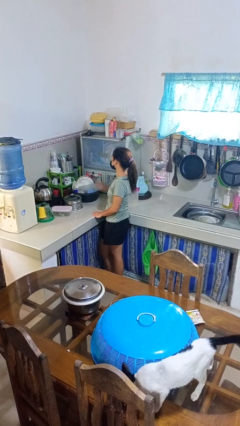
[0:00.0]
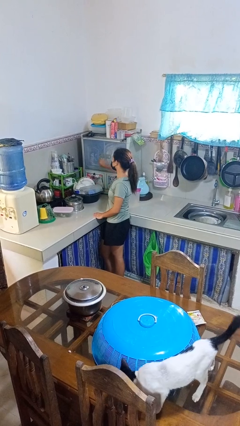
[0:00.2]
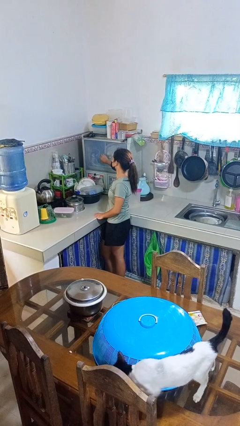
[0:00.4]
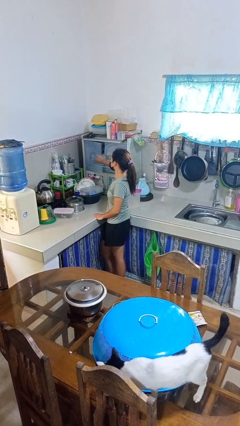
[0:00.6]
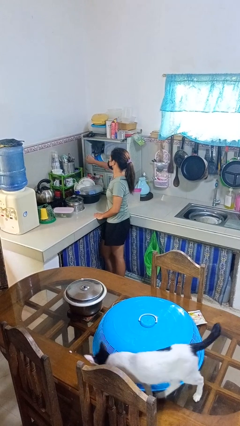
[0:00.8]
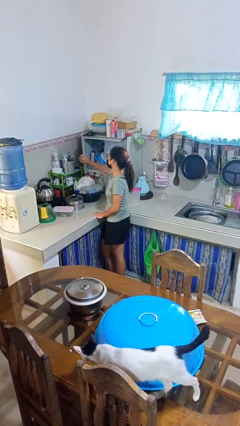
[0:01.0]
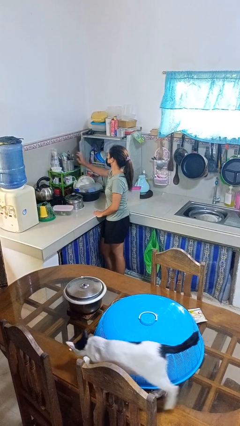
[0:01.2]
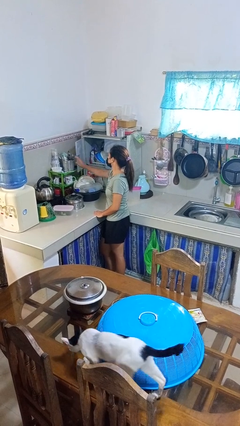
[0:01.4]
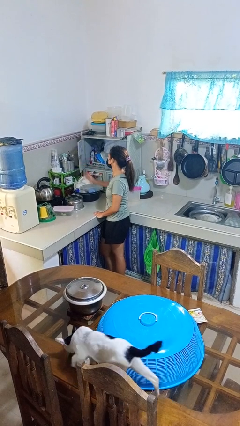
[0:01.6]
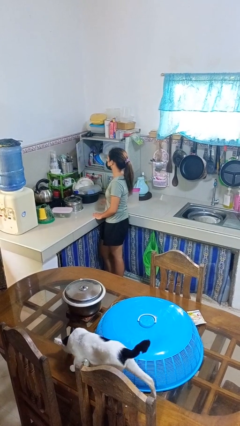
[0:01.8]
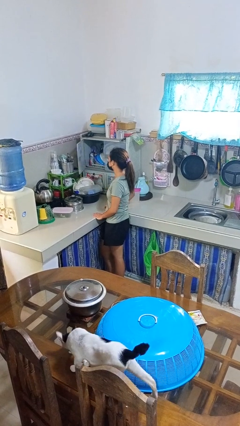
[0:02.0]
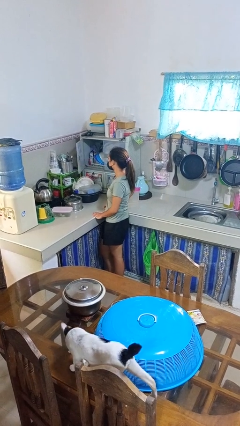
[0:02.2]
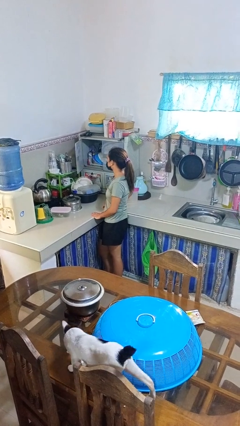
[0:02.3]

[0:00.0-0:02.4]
person opens kitchen drawer

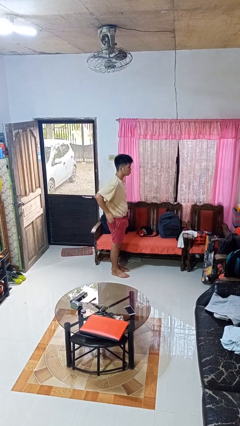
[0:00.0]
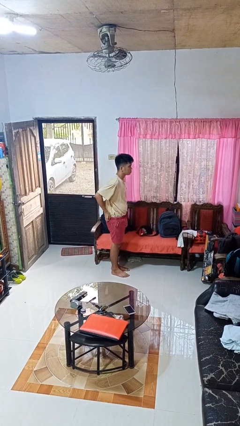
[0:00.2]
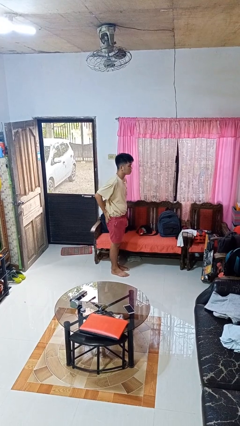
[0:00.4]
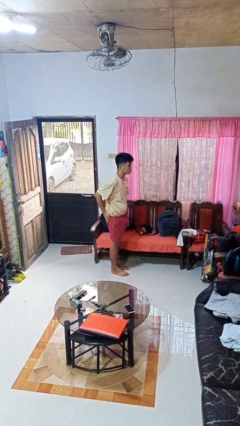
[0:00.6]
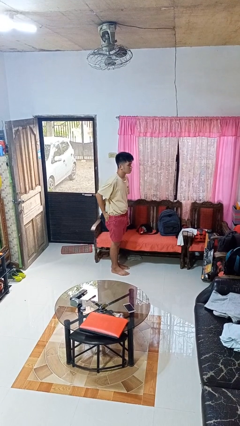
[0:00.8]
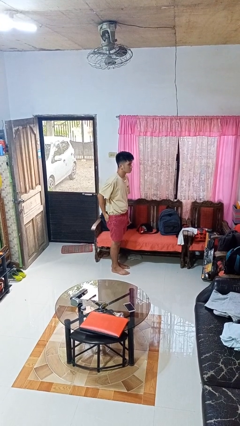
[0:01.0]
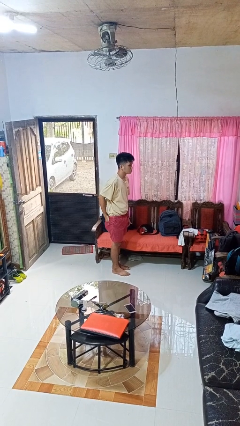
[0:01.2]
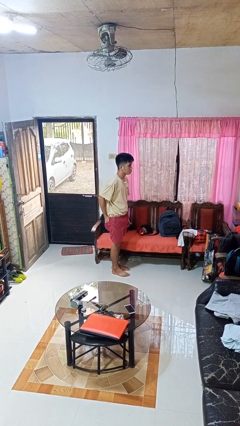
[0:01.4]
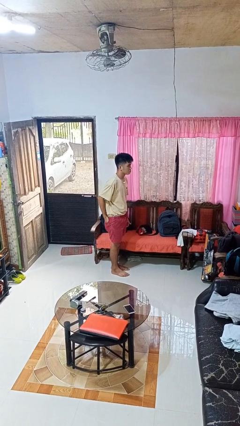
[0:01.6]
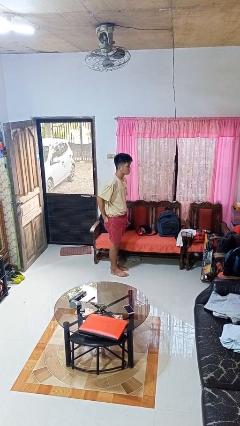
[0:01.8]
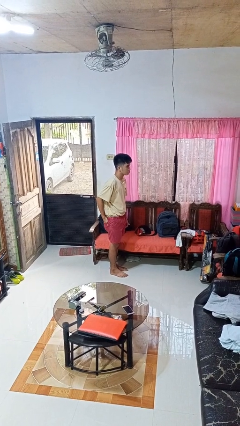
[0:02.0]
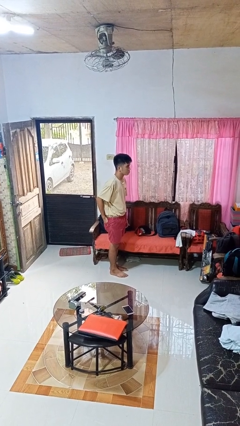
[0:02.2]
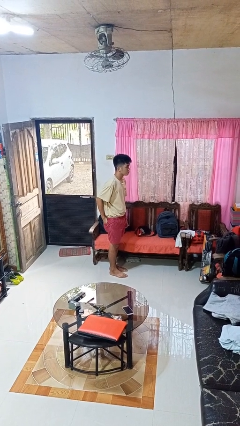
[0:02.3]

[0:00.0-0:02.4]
person puts hands in back pockets

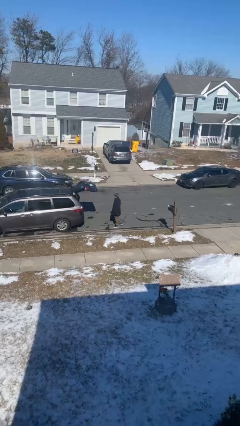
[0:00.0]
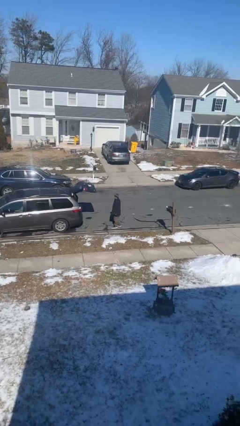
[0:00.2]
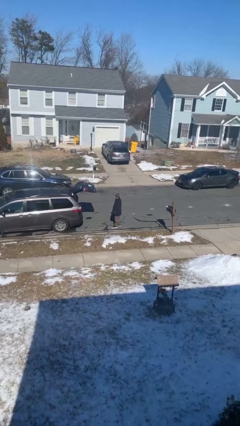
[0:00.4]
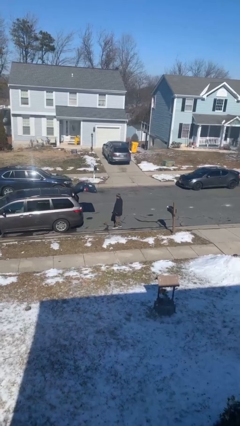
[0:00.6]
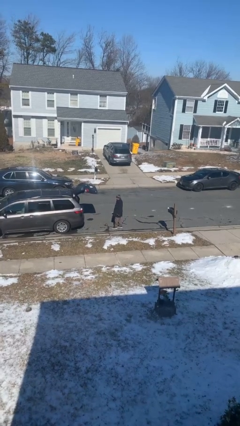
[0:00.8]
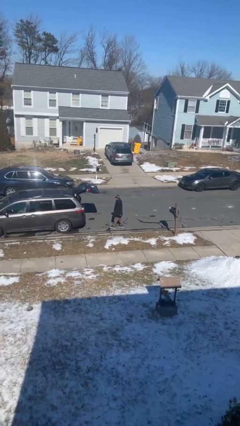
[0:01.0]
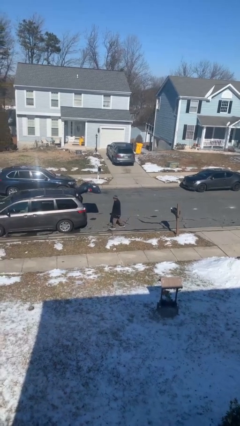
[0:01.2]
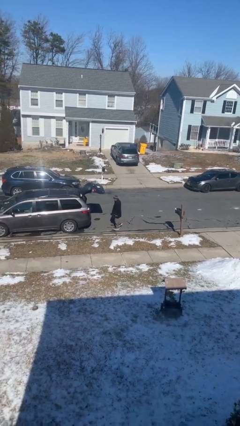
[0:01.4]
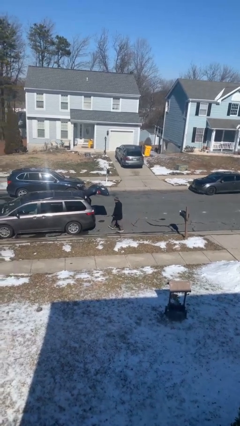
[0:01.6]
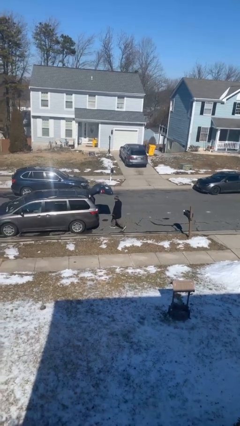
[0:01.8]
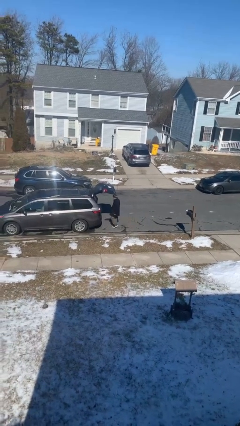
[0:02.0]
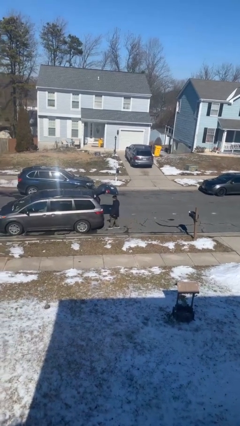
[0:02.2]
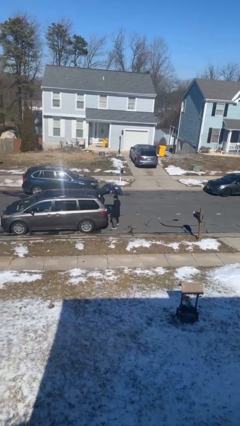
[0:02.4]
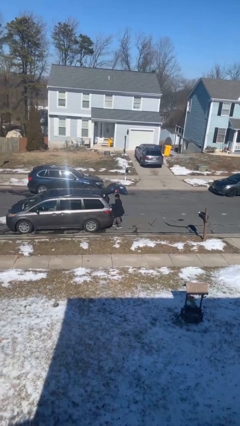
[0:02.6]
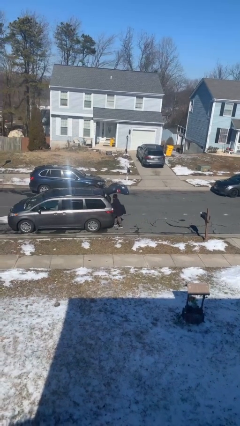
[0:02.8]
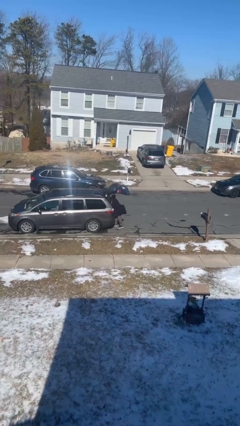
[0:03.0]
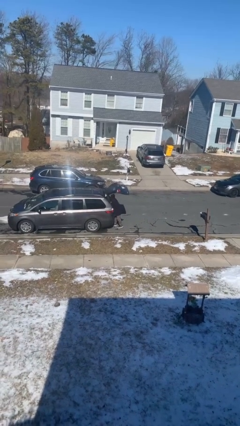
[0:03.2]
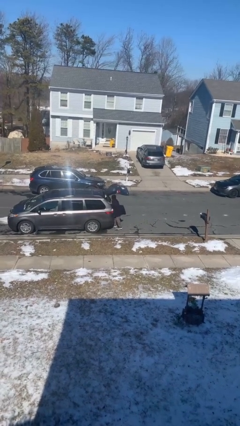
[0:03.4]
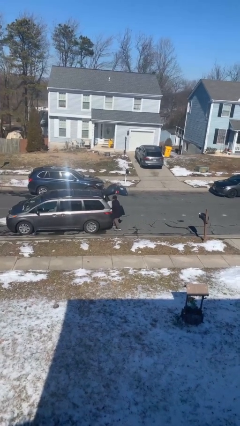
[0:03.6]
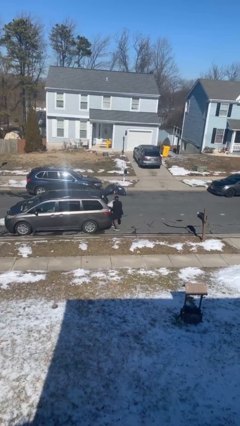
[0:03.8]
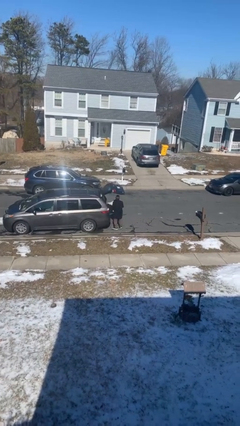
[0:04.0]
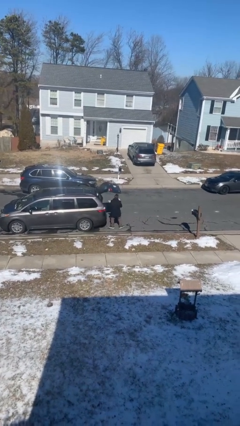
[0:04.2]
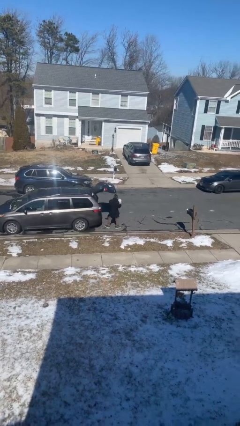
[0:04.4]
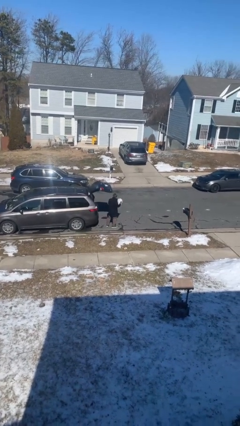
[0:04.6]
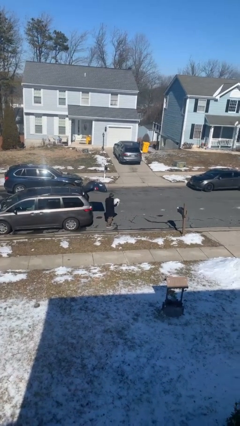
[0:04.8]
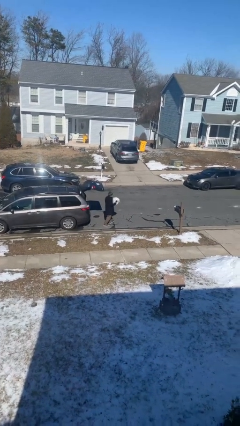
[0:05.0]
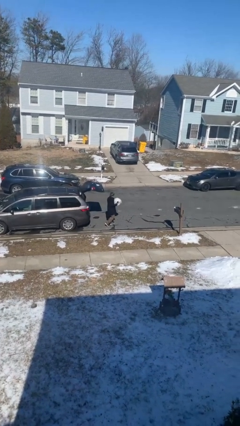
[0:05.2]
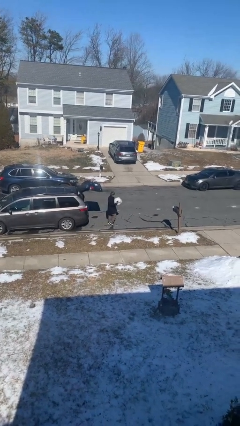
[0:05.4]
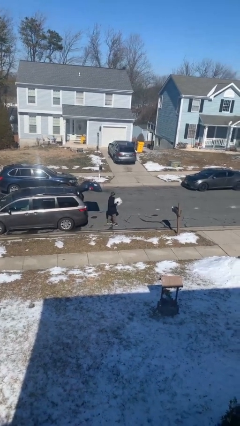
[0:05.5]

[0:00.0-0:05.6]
person unloads car

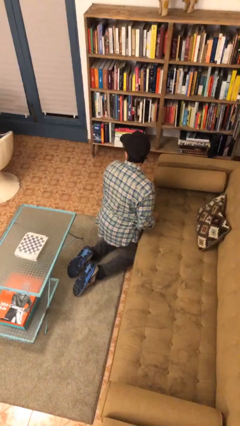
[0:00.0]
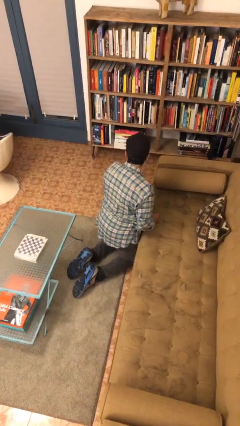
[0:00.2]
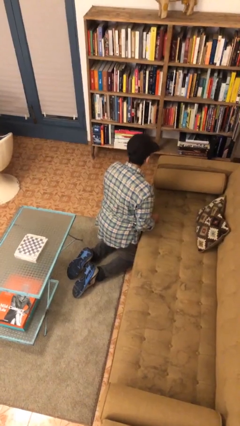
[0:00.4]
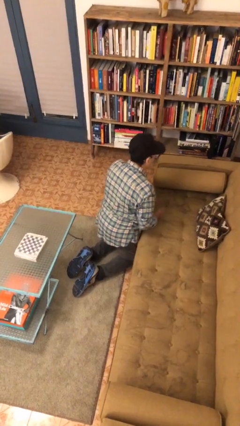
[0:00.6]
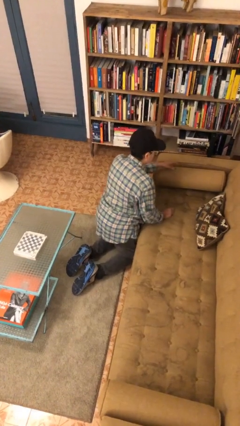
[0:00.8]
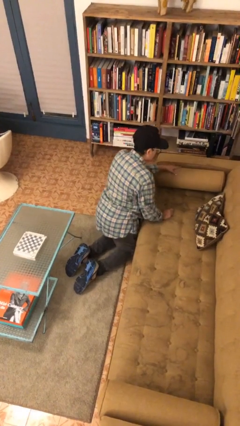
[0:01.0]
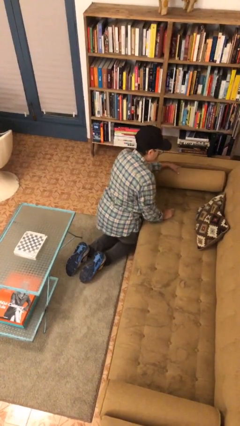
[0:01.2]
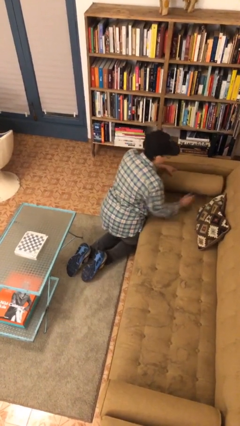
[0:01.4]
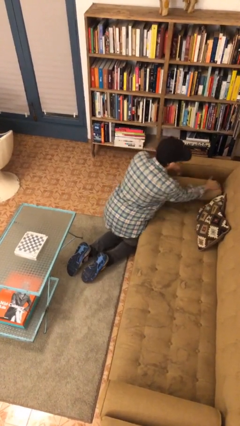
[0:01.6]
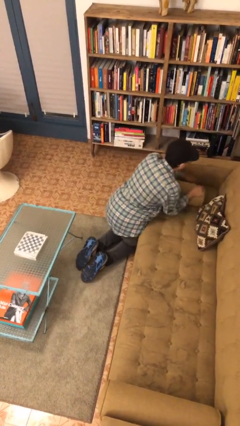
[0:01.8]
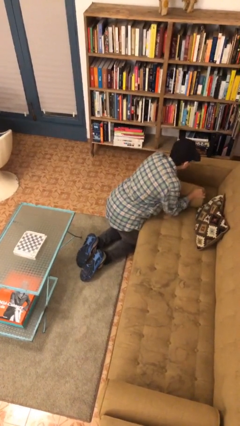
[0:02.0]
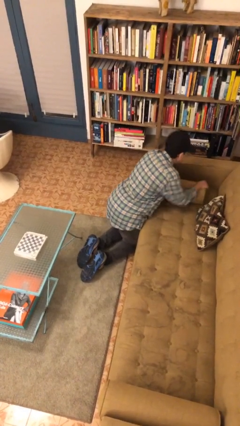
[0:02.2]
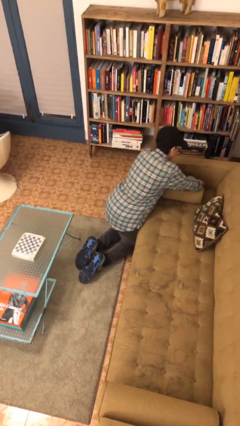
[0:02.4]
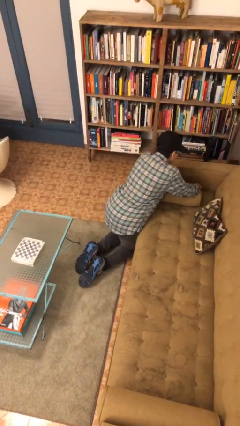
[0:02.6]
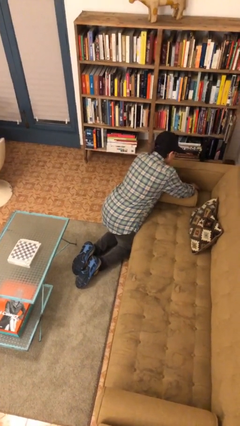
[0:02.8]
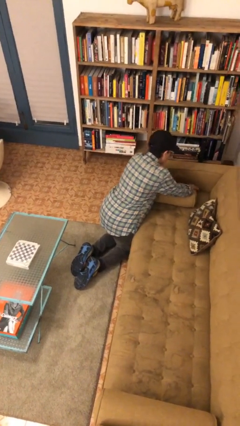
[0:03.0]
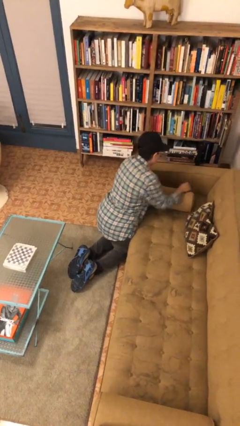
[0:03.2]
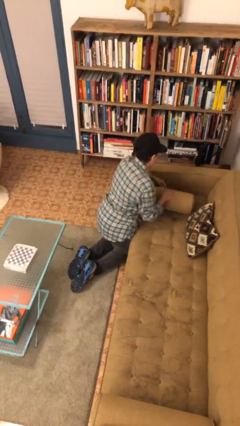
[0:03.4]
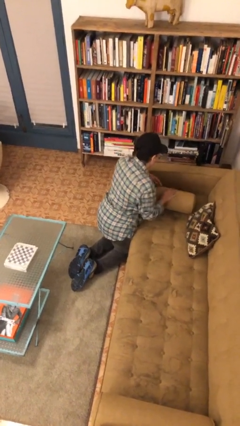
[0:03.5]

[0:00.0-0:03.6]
person searches in couch

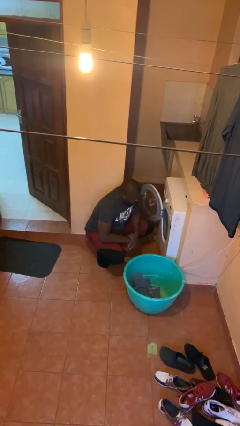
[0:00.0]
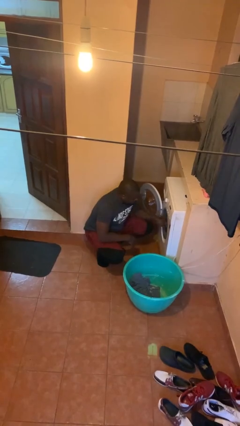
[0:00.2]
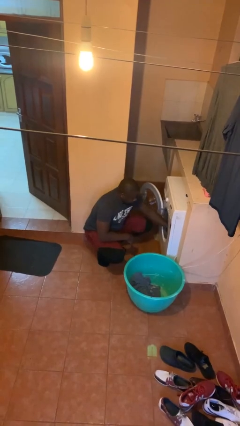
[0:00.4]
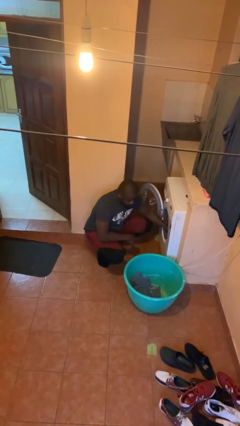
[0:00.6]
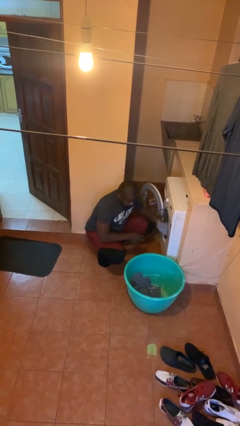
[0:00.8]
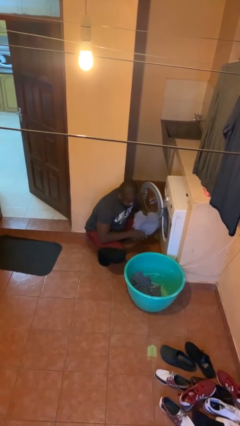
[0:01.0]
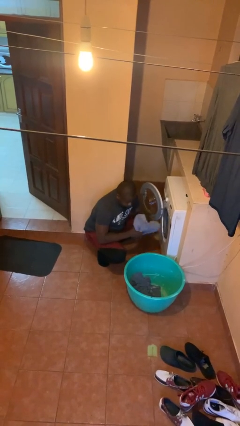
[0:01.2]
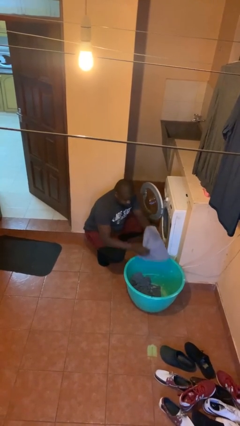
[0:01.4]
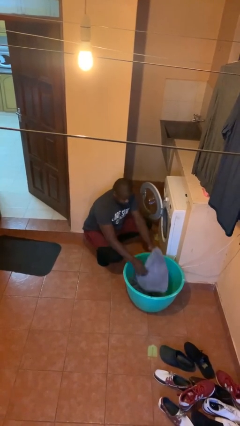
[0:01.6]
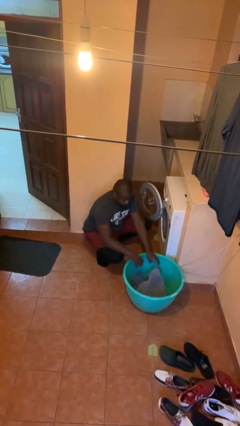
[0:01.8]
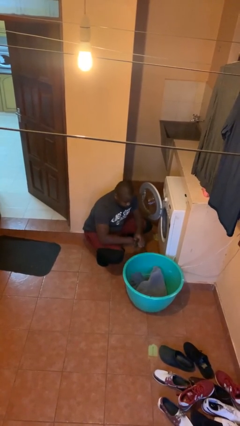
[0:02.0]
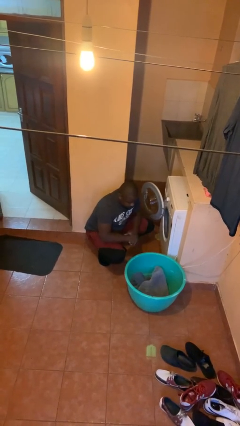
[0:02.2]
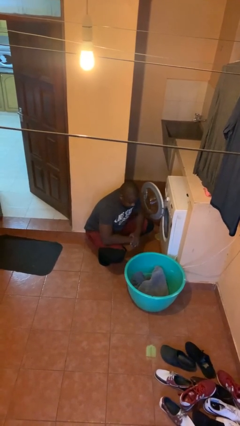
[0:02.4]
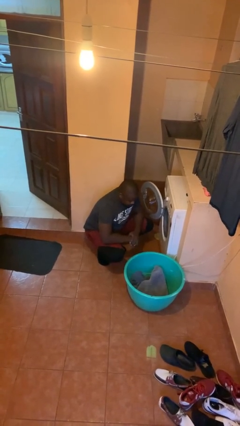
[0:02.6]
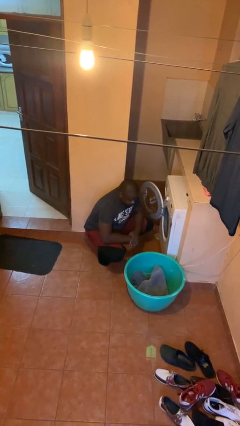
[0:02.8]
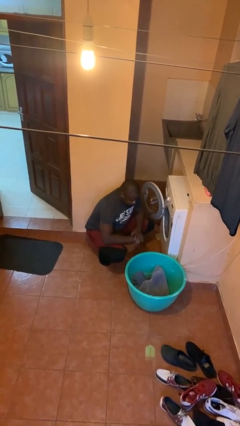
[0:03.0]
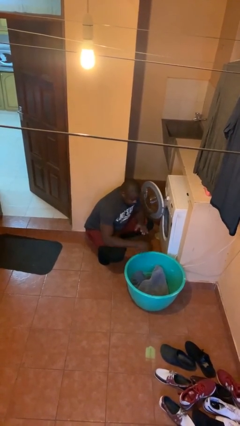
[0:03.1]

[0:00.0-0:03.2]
person unloads clotheswasher

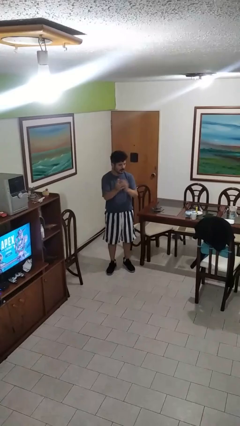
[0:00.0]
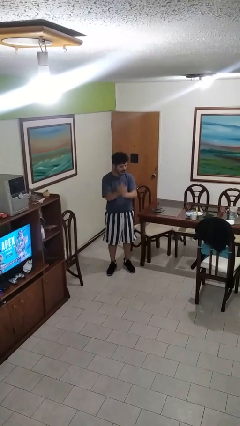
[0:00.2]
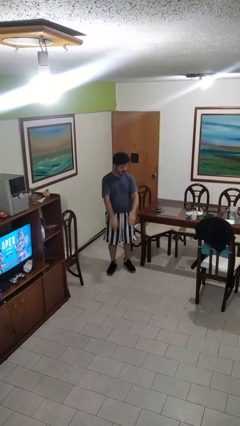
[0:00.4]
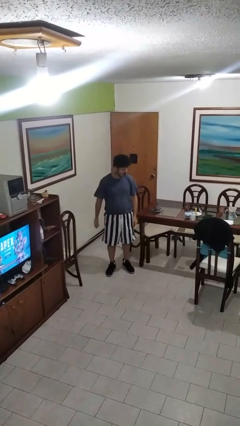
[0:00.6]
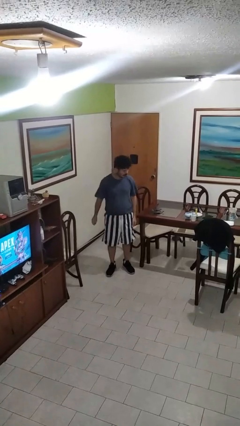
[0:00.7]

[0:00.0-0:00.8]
person claps hands
